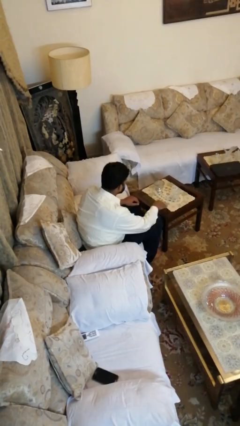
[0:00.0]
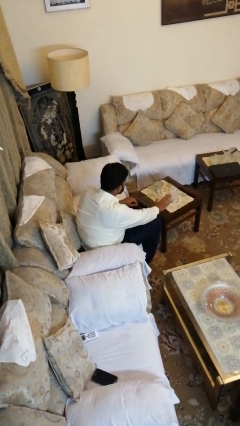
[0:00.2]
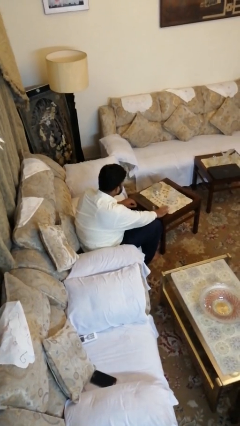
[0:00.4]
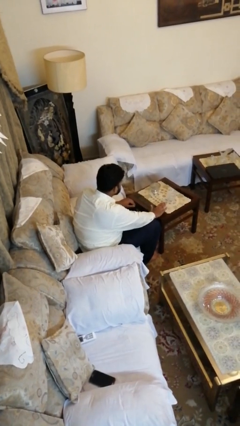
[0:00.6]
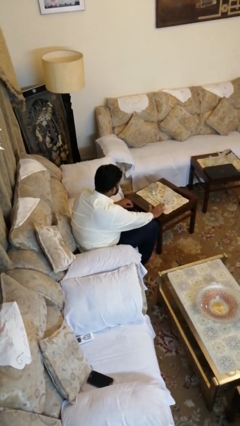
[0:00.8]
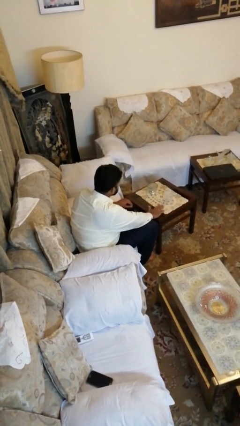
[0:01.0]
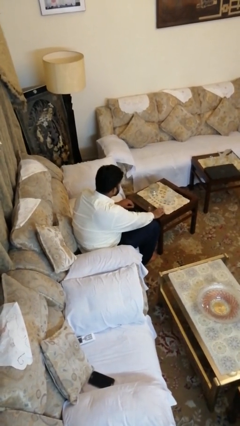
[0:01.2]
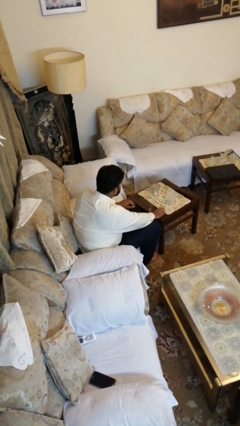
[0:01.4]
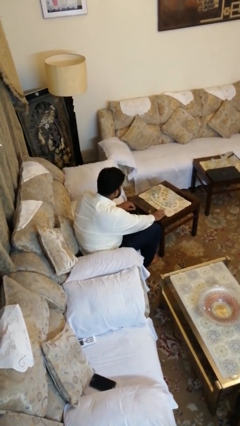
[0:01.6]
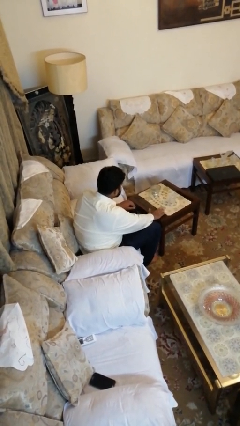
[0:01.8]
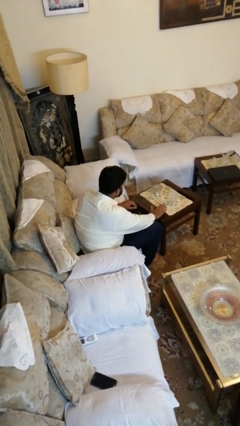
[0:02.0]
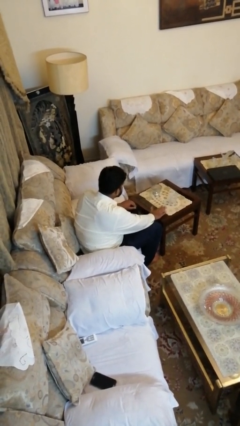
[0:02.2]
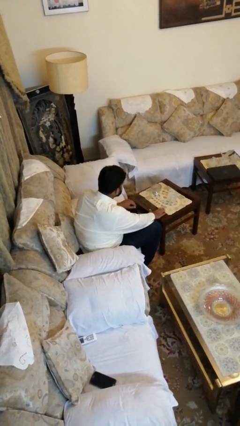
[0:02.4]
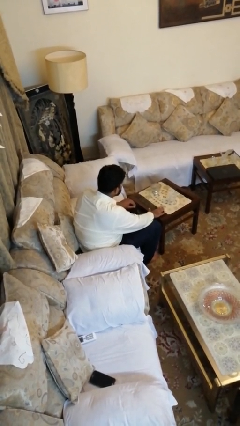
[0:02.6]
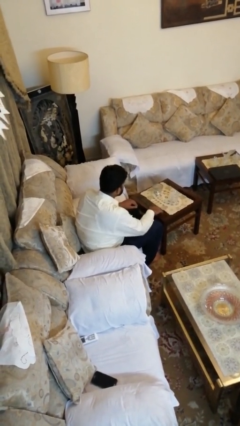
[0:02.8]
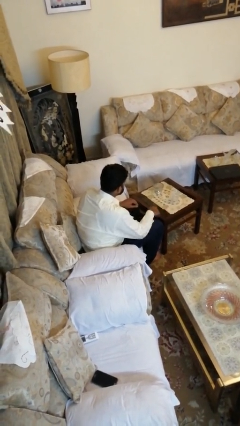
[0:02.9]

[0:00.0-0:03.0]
person taps object with finger

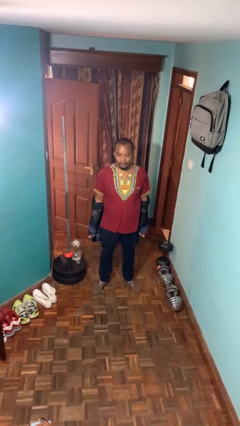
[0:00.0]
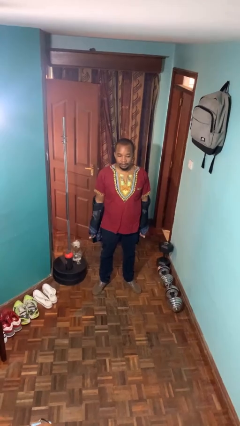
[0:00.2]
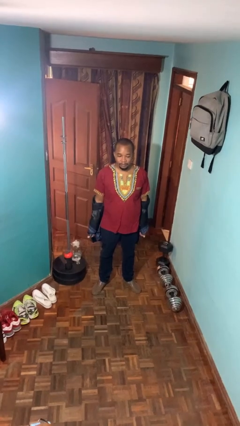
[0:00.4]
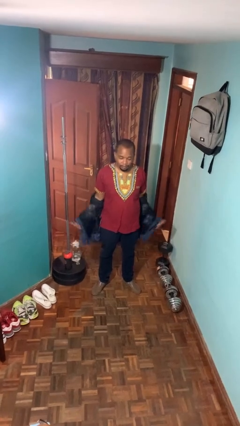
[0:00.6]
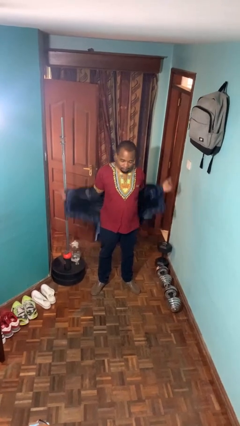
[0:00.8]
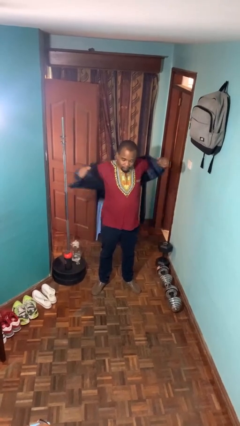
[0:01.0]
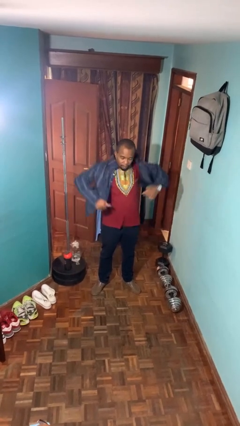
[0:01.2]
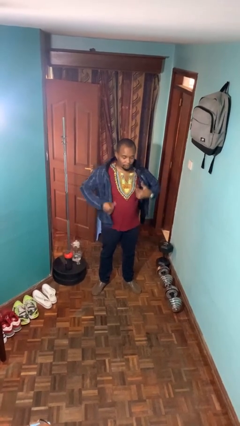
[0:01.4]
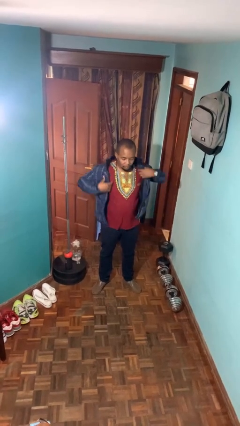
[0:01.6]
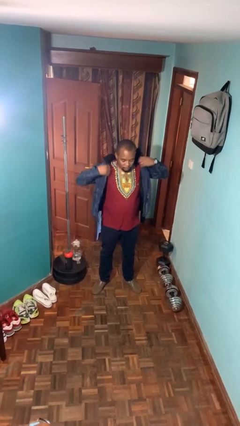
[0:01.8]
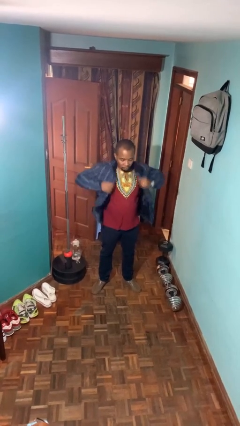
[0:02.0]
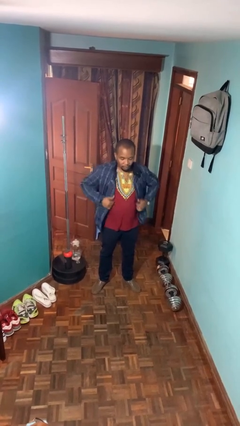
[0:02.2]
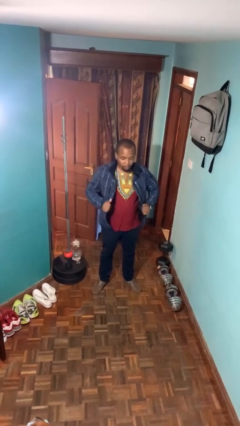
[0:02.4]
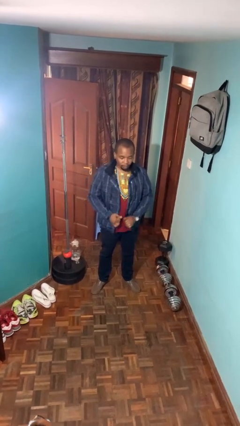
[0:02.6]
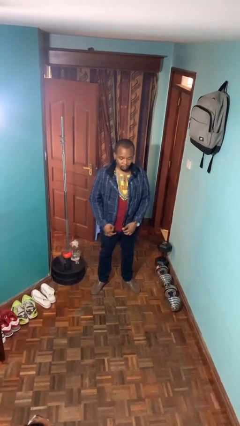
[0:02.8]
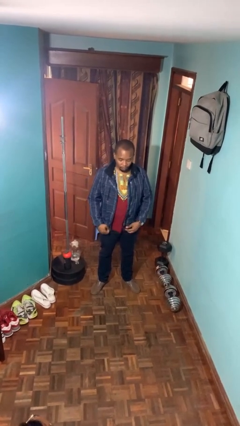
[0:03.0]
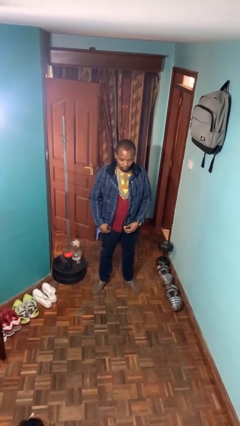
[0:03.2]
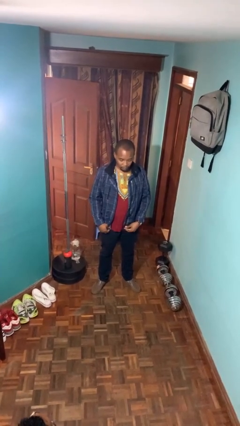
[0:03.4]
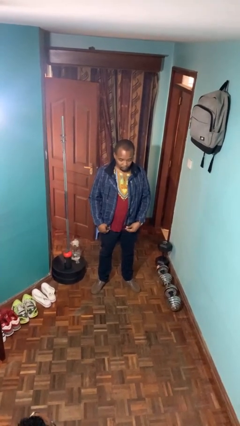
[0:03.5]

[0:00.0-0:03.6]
person puts on jacket

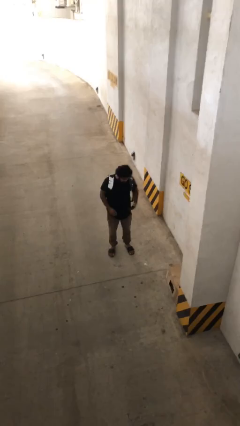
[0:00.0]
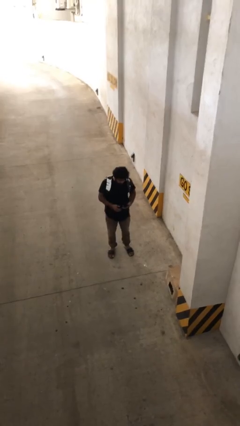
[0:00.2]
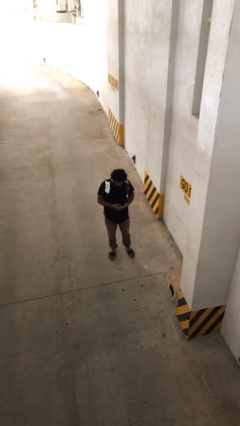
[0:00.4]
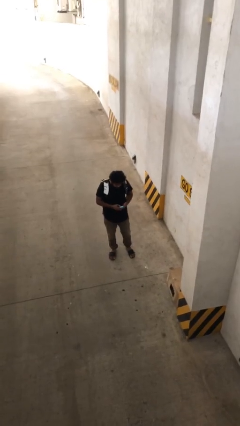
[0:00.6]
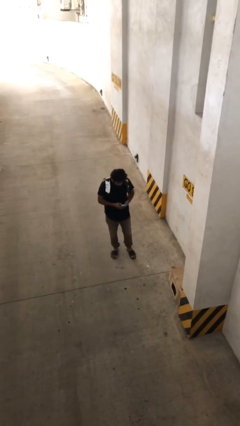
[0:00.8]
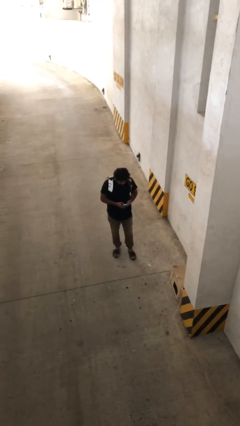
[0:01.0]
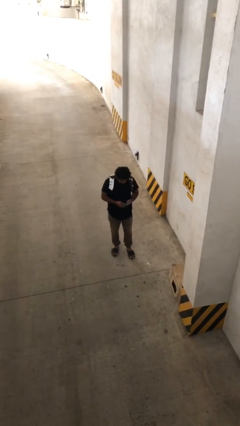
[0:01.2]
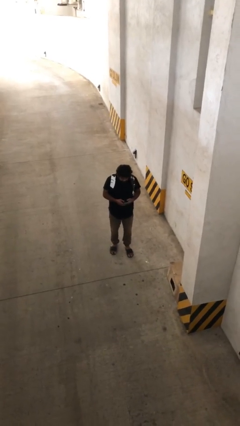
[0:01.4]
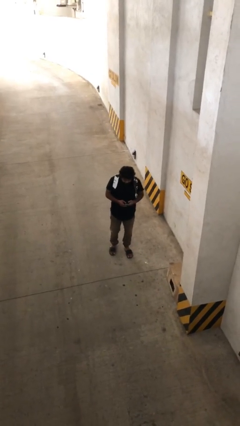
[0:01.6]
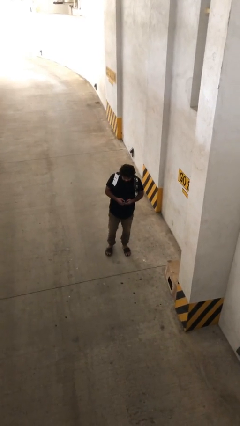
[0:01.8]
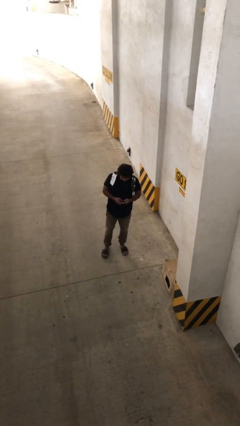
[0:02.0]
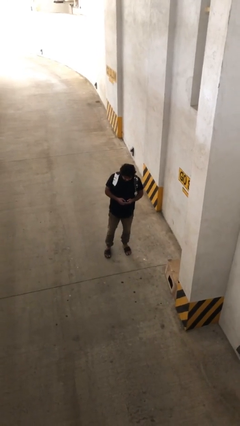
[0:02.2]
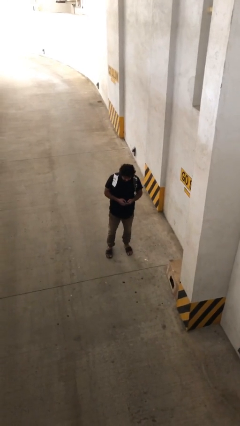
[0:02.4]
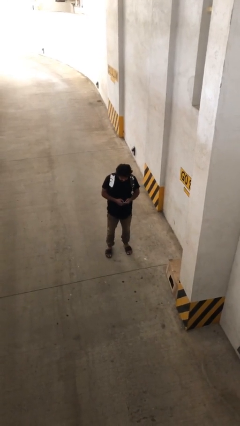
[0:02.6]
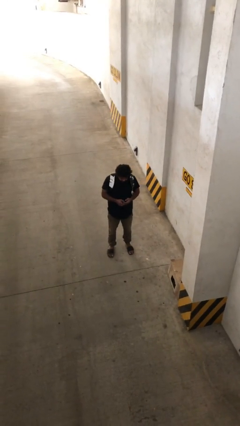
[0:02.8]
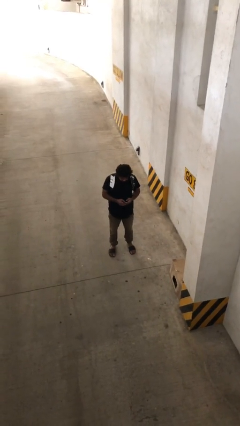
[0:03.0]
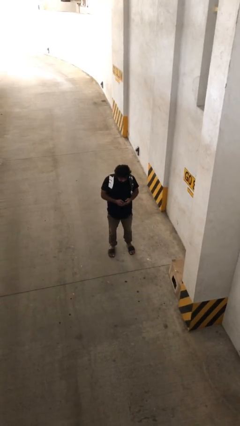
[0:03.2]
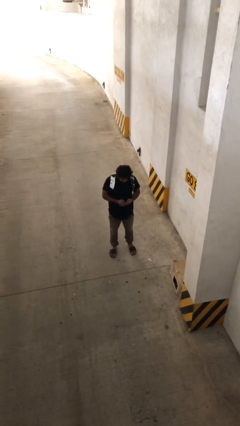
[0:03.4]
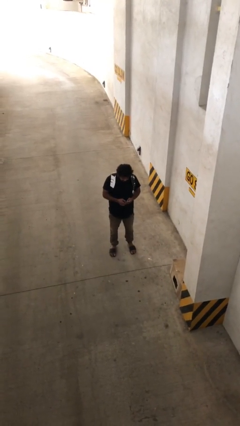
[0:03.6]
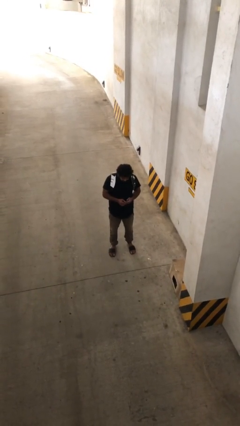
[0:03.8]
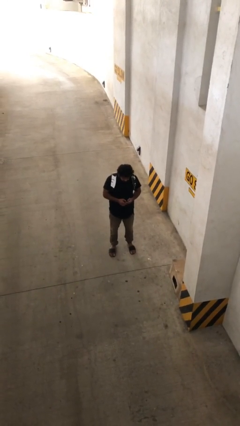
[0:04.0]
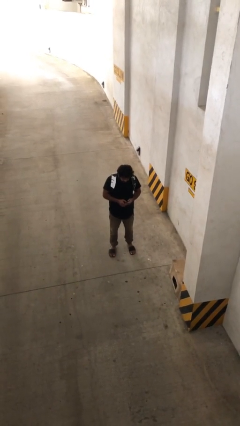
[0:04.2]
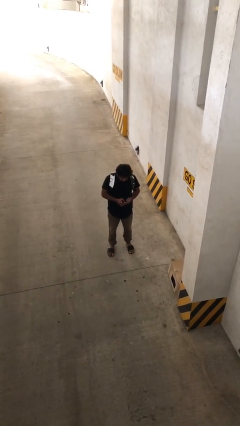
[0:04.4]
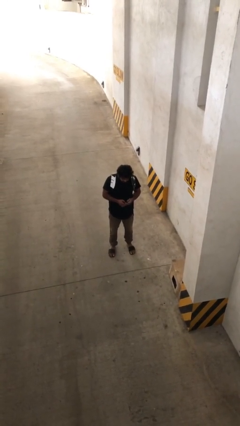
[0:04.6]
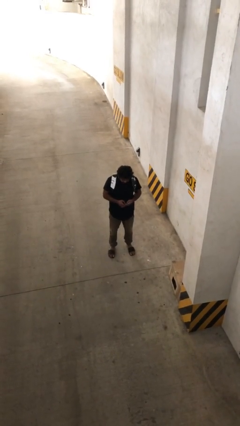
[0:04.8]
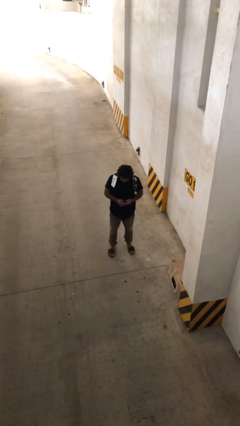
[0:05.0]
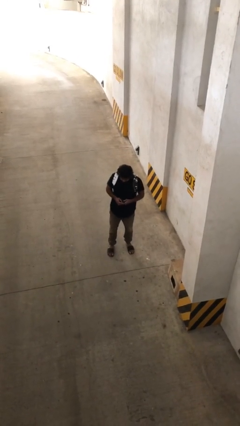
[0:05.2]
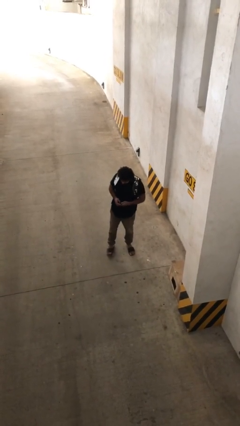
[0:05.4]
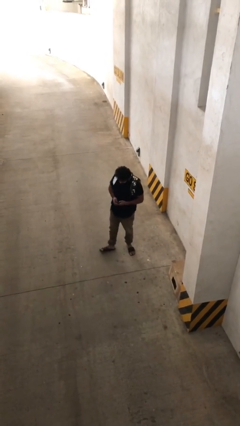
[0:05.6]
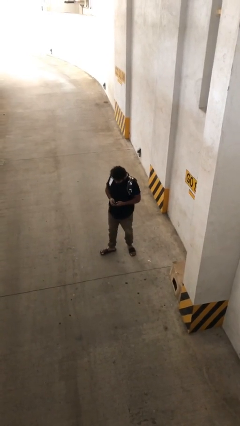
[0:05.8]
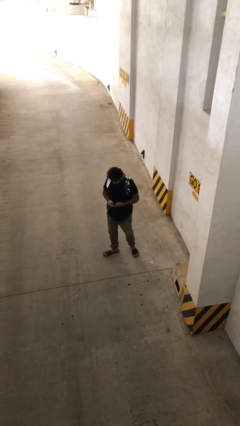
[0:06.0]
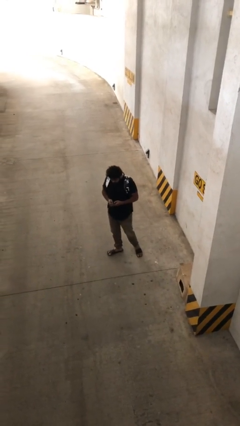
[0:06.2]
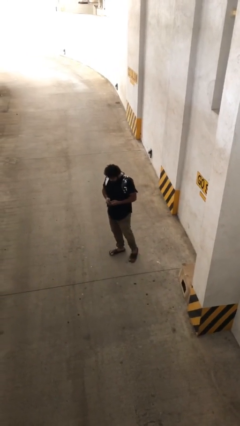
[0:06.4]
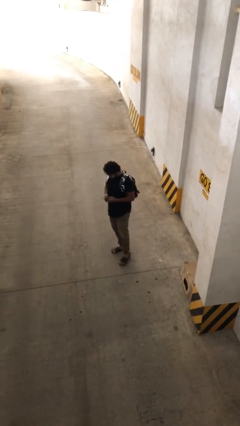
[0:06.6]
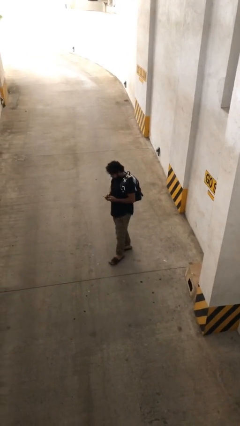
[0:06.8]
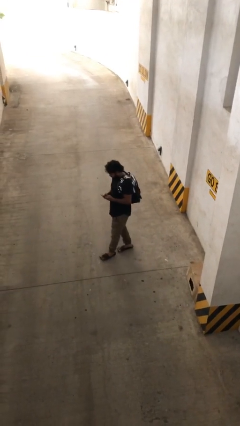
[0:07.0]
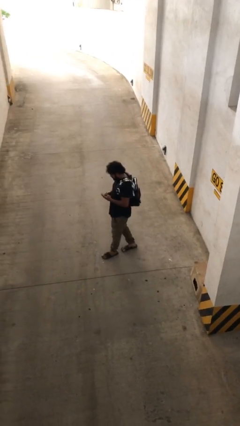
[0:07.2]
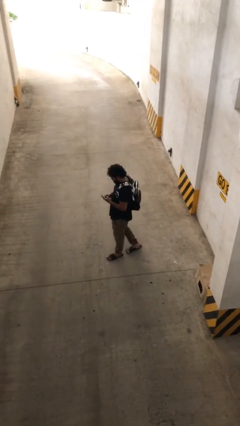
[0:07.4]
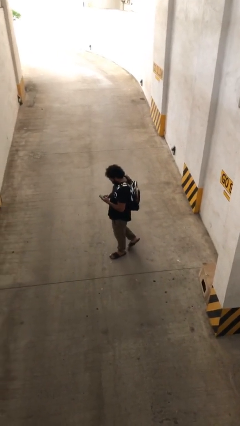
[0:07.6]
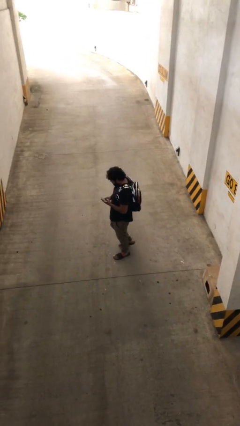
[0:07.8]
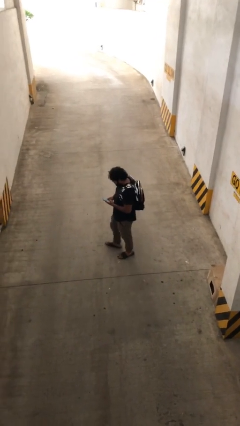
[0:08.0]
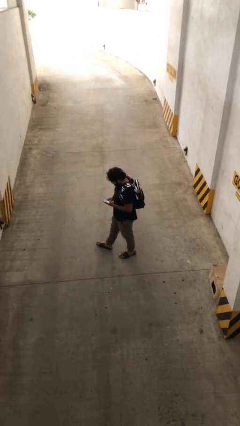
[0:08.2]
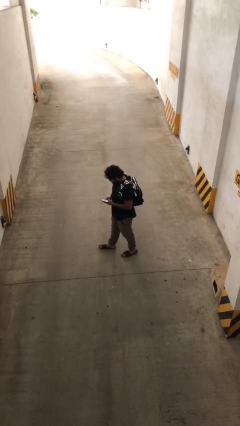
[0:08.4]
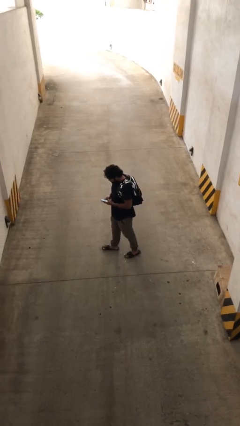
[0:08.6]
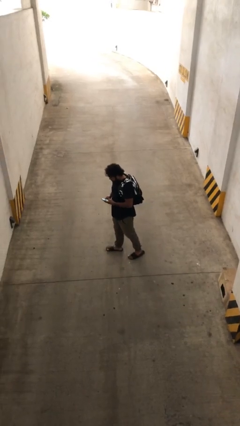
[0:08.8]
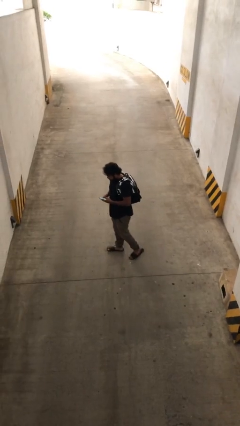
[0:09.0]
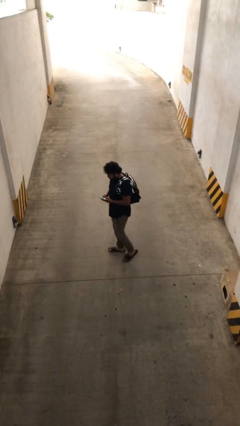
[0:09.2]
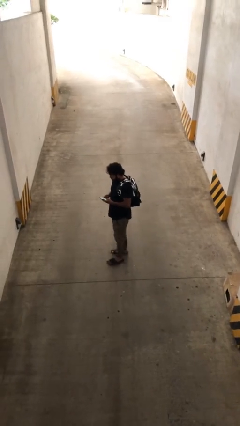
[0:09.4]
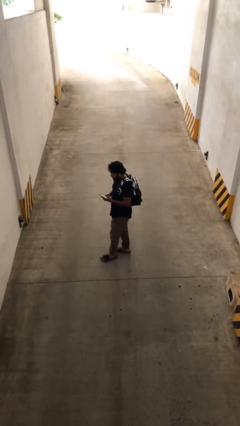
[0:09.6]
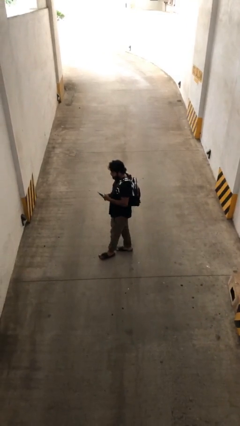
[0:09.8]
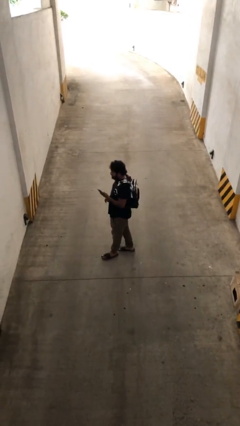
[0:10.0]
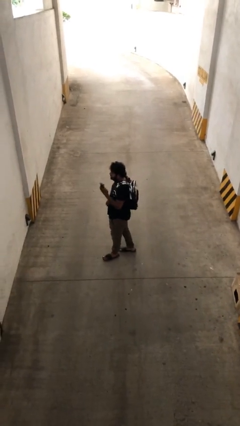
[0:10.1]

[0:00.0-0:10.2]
person texts on phone

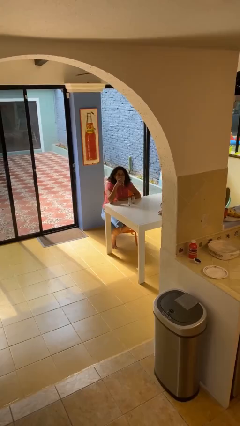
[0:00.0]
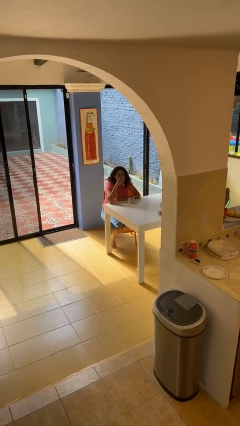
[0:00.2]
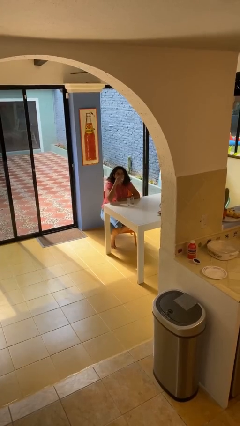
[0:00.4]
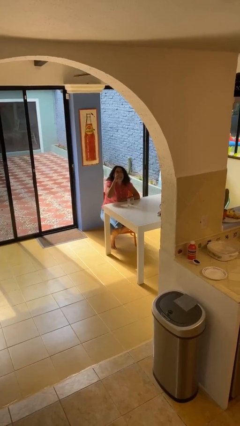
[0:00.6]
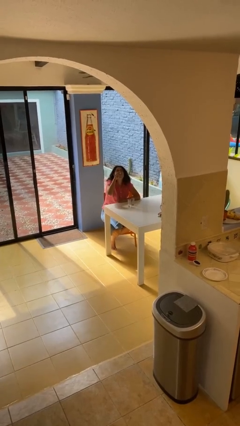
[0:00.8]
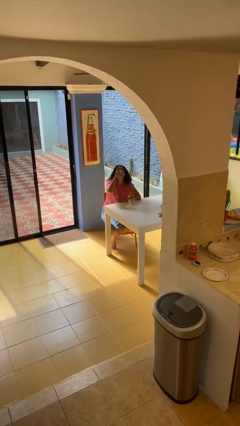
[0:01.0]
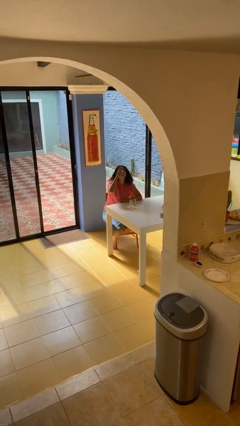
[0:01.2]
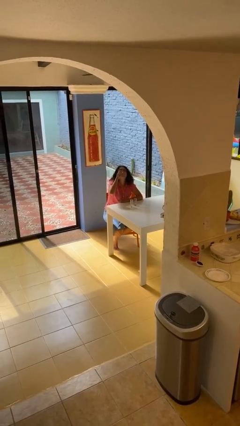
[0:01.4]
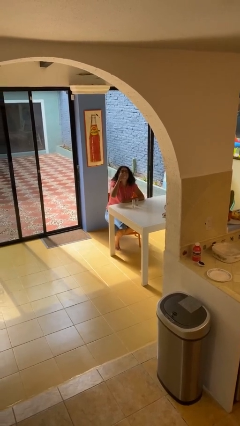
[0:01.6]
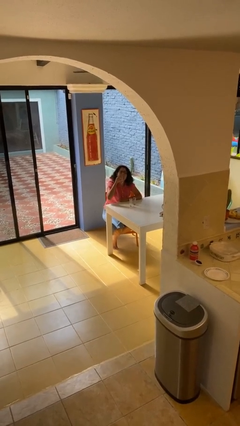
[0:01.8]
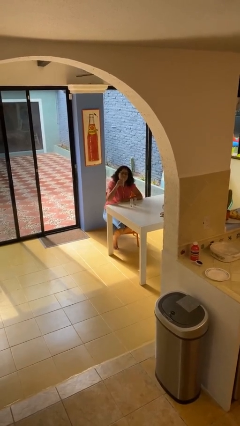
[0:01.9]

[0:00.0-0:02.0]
person drinks from shotglass
